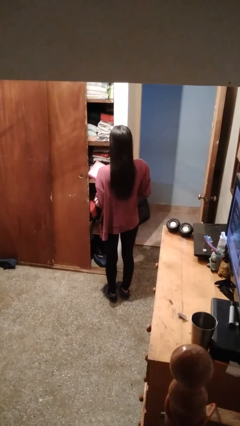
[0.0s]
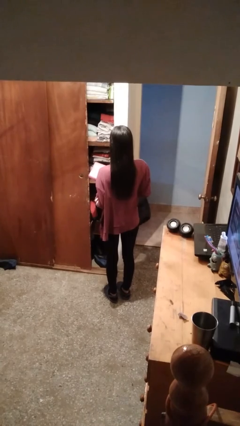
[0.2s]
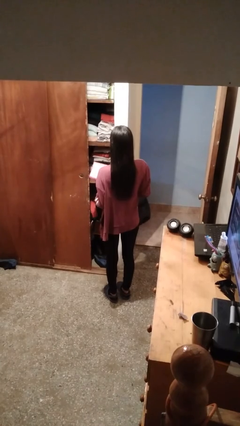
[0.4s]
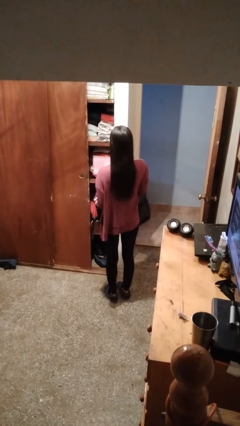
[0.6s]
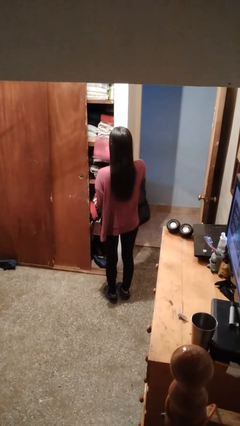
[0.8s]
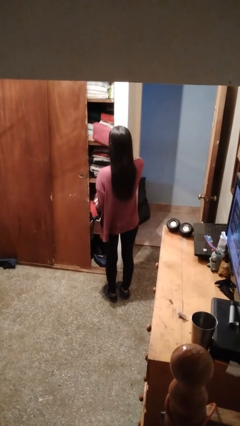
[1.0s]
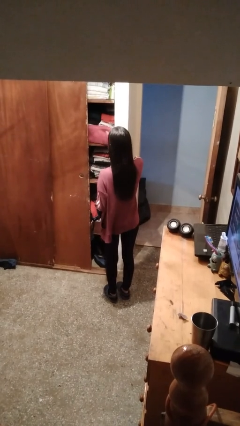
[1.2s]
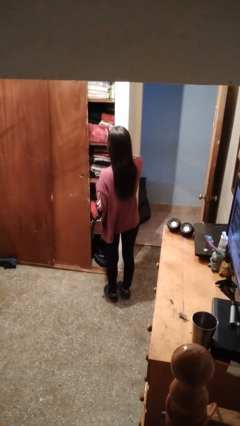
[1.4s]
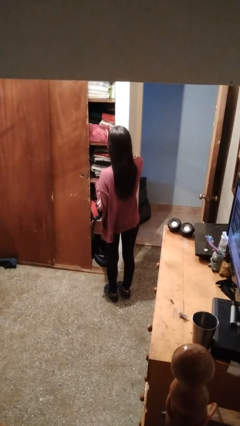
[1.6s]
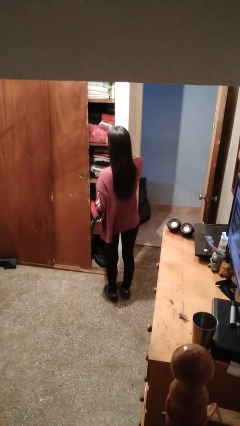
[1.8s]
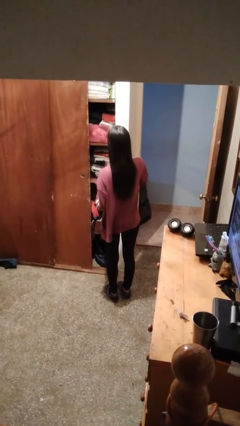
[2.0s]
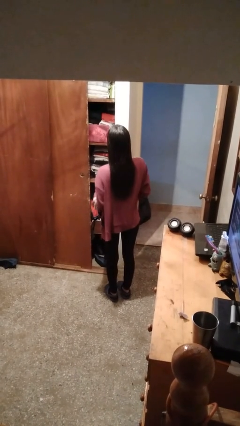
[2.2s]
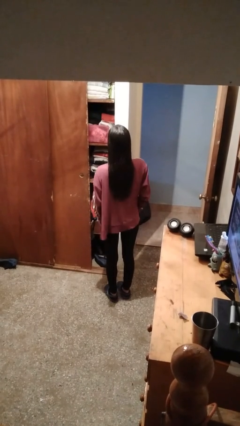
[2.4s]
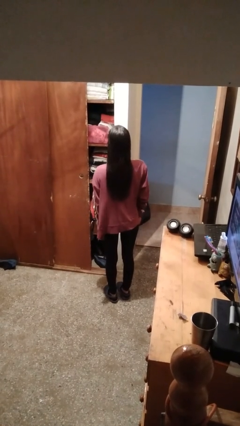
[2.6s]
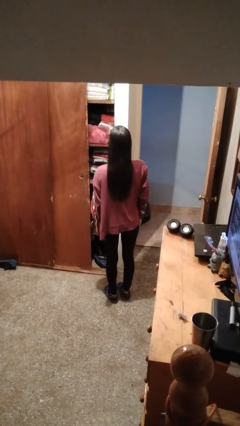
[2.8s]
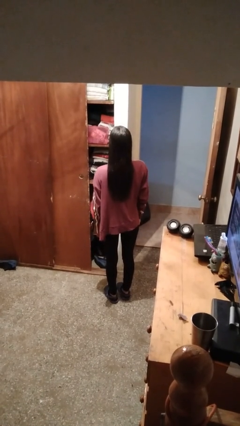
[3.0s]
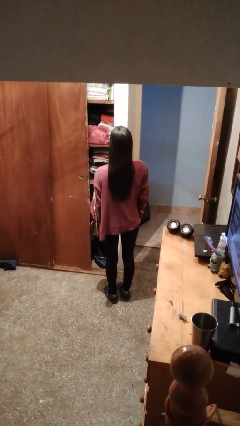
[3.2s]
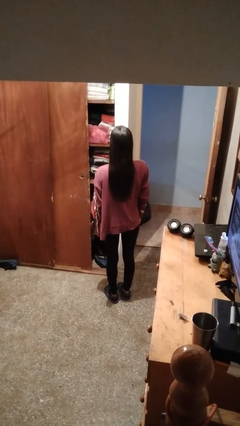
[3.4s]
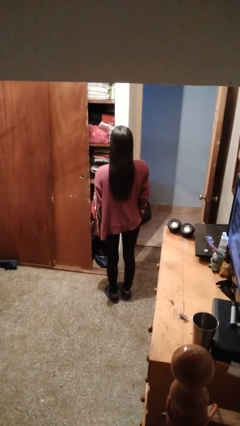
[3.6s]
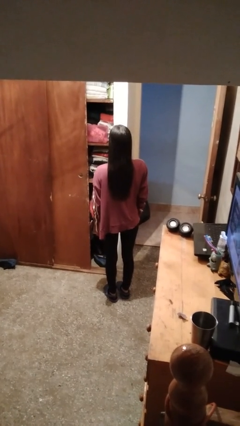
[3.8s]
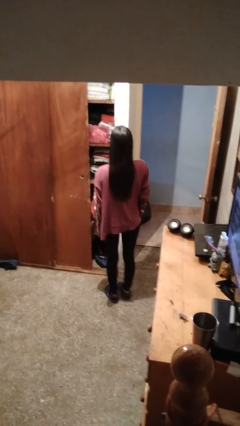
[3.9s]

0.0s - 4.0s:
person picks up object from shelf

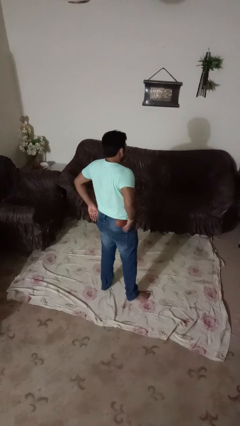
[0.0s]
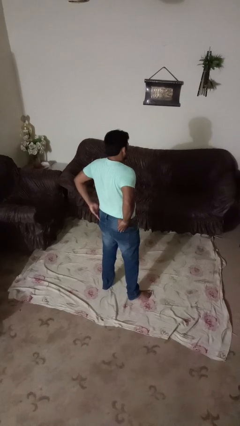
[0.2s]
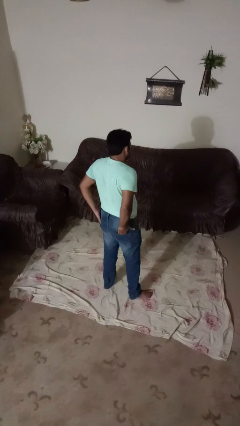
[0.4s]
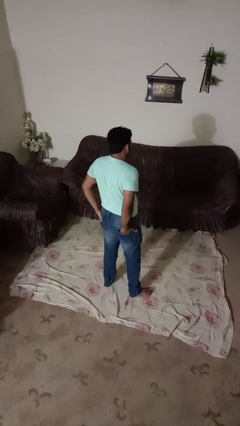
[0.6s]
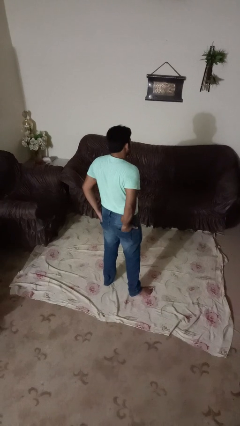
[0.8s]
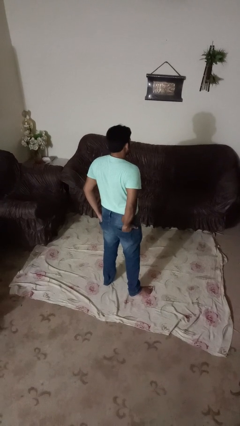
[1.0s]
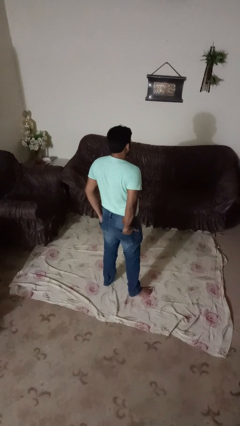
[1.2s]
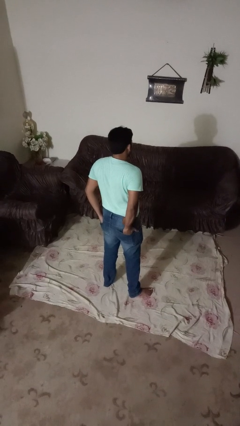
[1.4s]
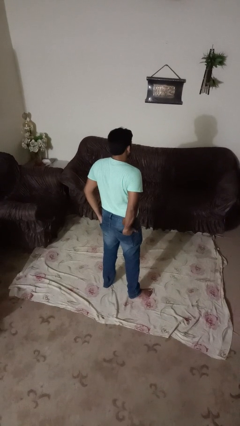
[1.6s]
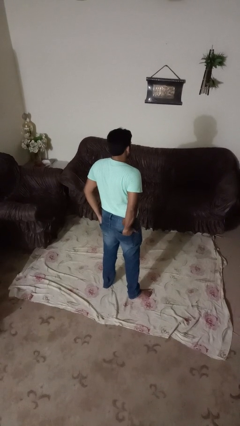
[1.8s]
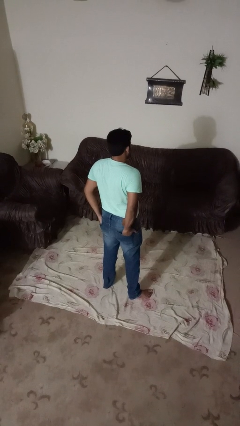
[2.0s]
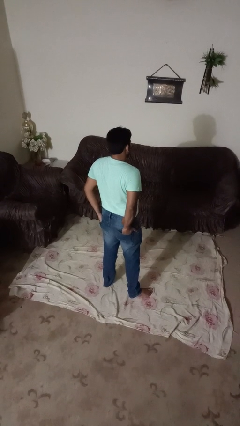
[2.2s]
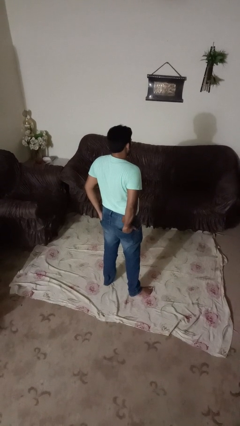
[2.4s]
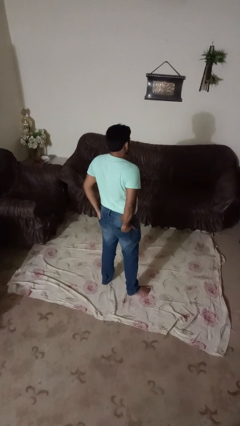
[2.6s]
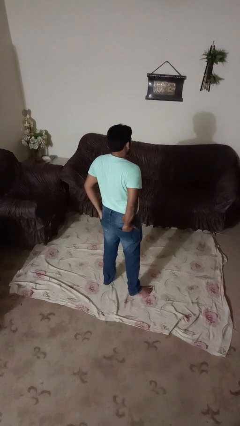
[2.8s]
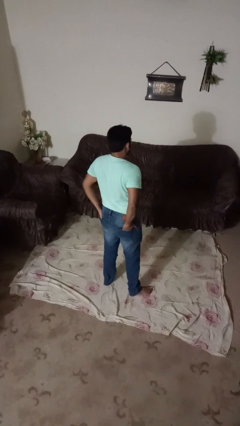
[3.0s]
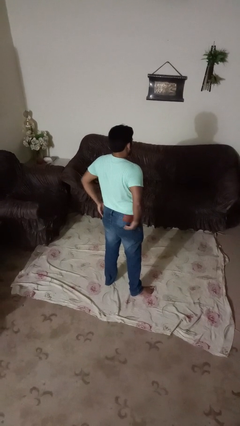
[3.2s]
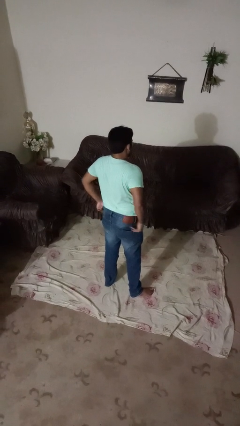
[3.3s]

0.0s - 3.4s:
person puts hands in back pockets

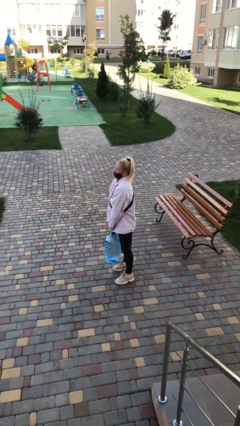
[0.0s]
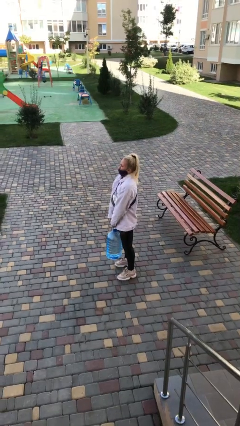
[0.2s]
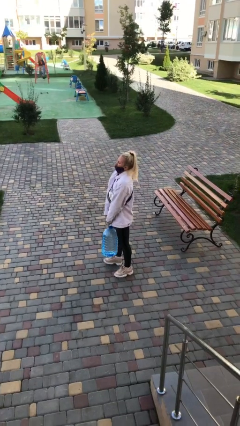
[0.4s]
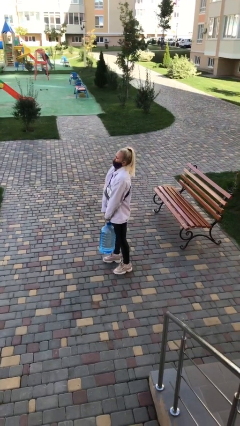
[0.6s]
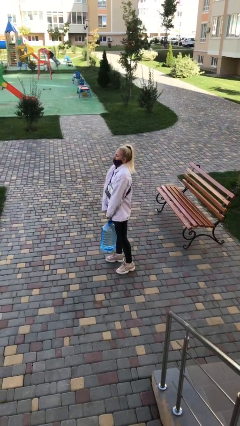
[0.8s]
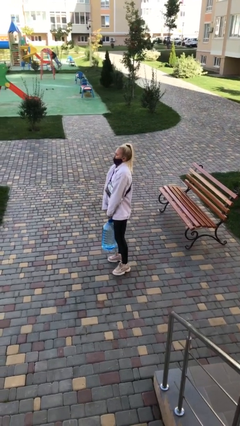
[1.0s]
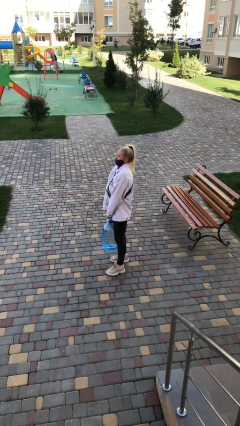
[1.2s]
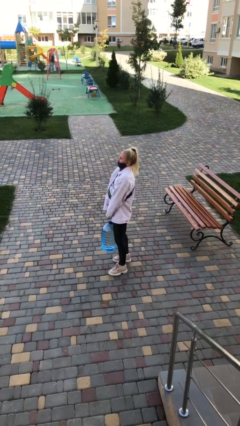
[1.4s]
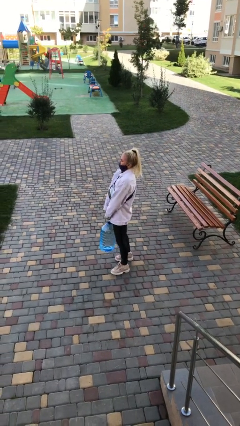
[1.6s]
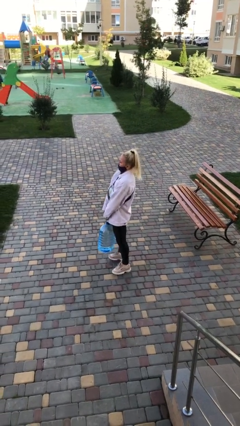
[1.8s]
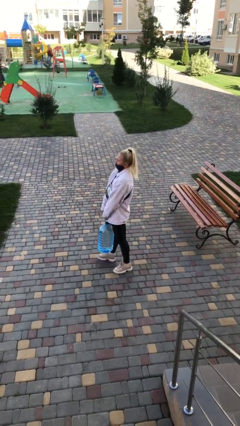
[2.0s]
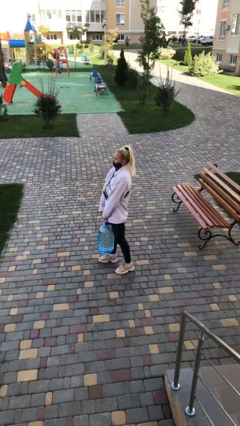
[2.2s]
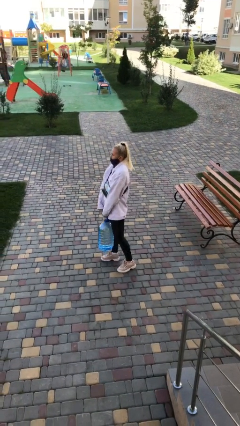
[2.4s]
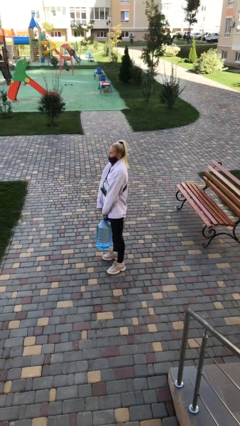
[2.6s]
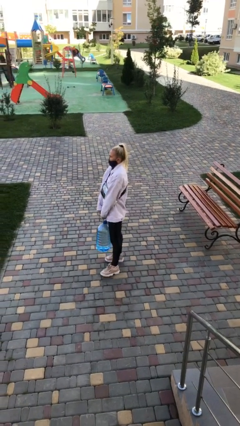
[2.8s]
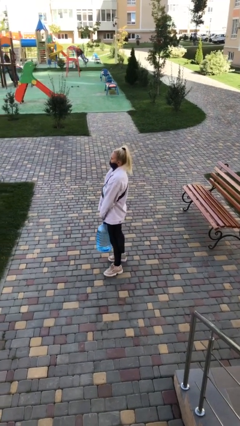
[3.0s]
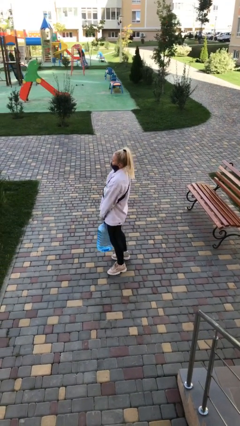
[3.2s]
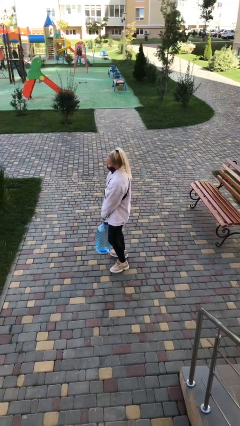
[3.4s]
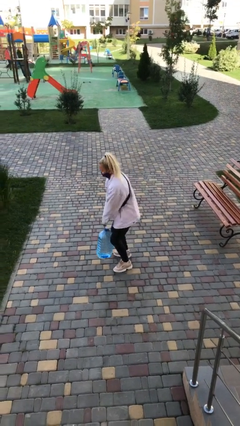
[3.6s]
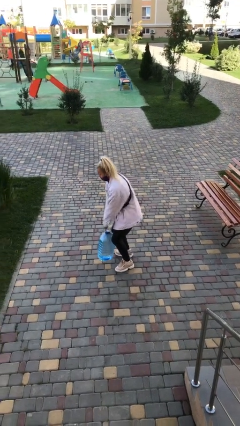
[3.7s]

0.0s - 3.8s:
person carries heavy object

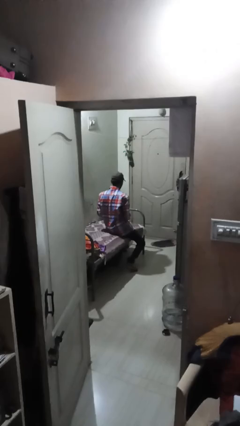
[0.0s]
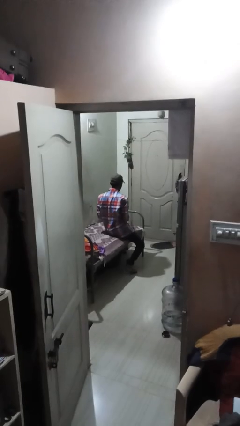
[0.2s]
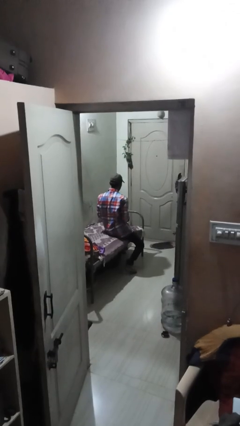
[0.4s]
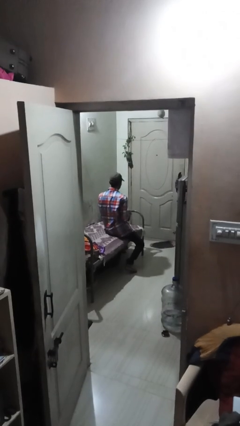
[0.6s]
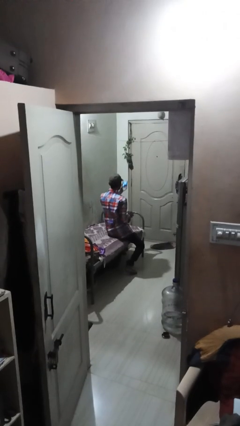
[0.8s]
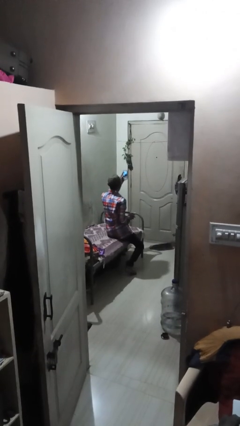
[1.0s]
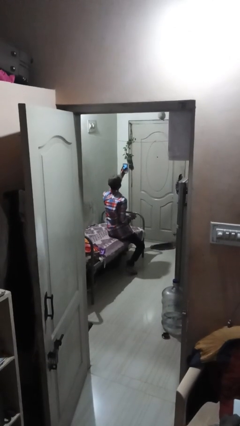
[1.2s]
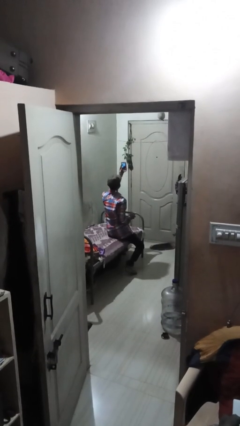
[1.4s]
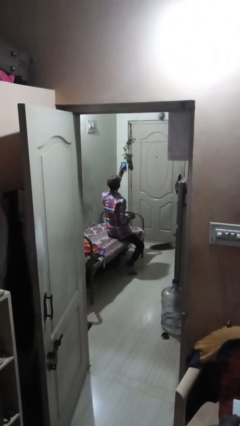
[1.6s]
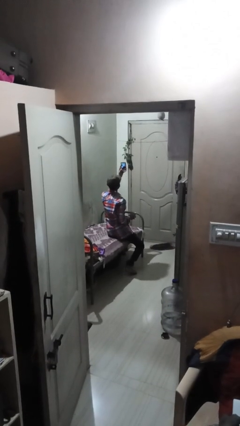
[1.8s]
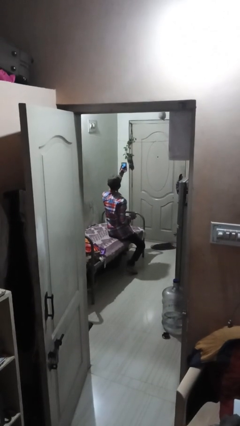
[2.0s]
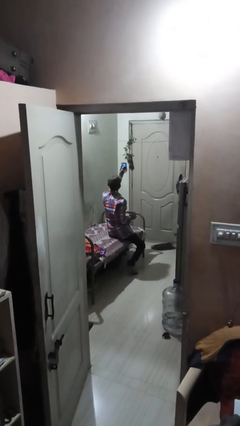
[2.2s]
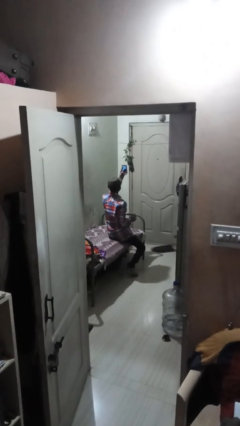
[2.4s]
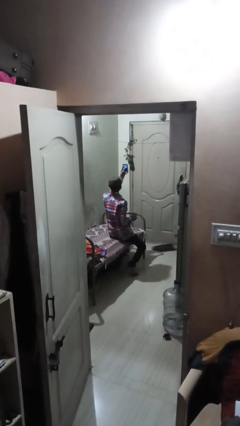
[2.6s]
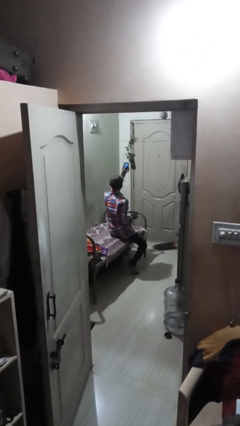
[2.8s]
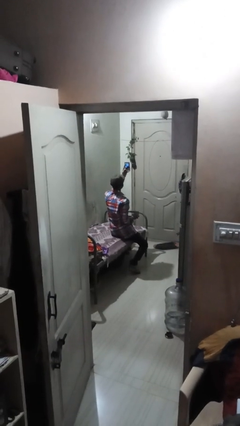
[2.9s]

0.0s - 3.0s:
person takes selfie

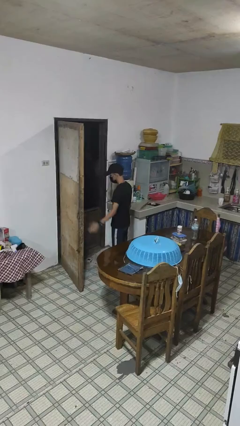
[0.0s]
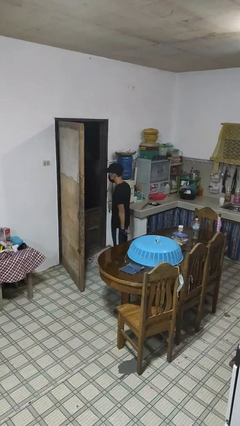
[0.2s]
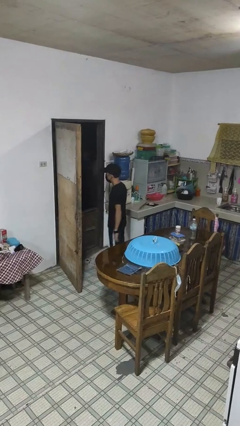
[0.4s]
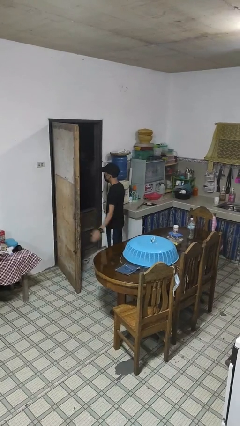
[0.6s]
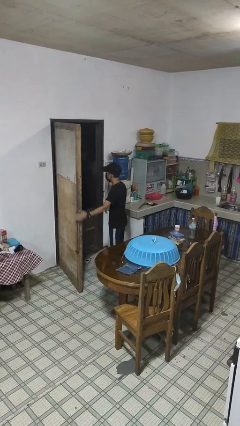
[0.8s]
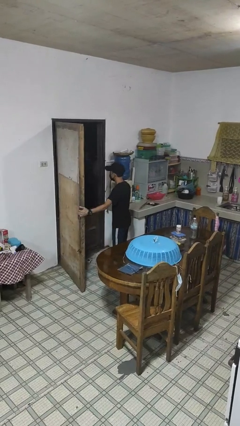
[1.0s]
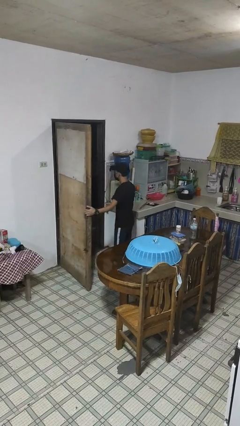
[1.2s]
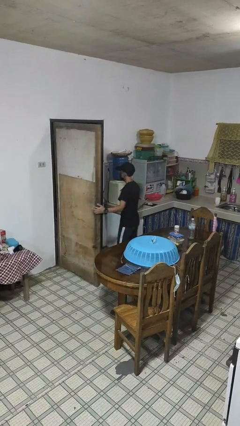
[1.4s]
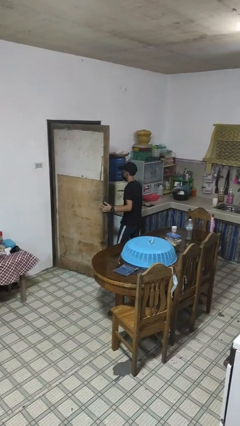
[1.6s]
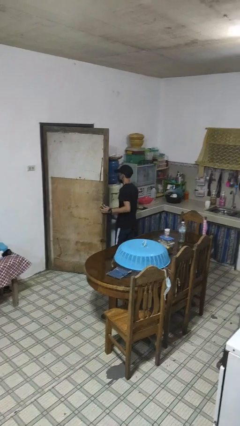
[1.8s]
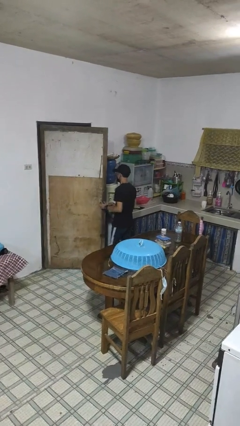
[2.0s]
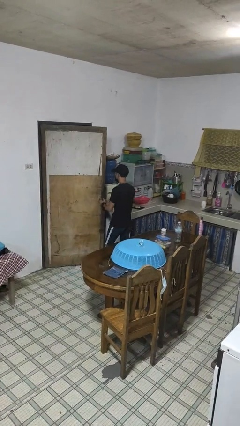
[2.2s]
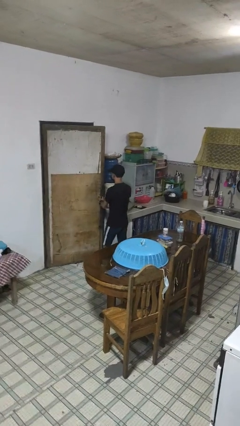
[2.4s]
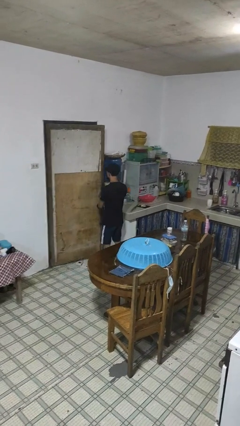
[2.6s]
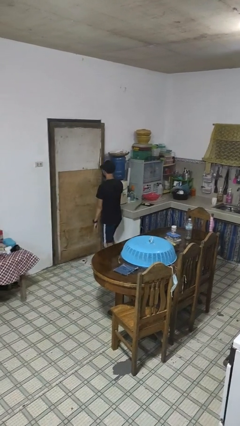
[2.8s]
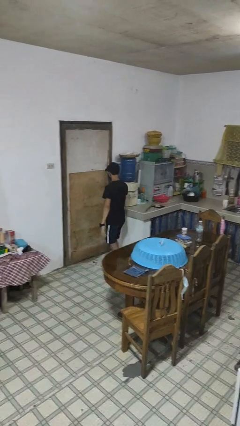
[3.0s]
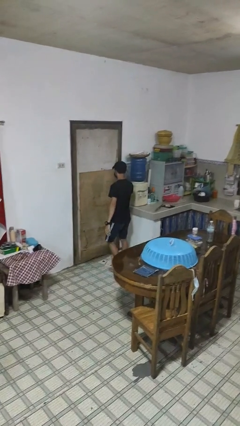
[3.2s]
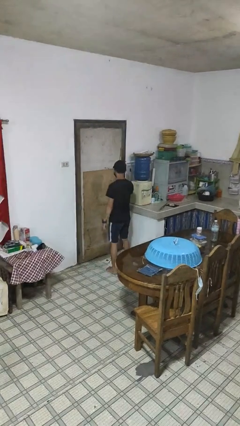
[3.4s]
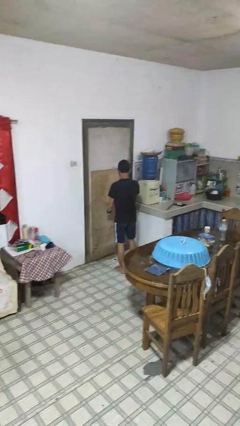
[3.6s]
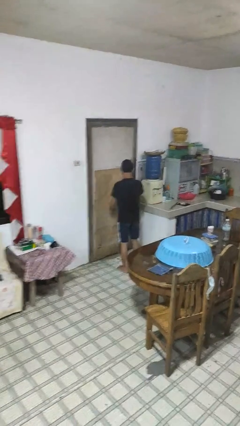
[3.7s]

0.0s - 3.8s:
person closes facility door

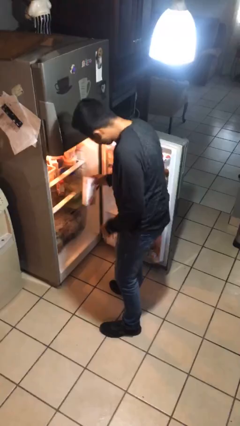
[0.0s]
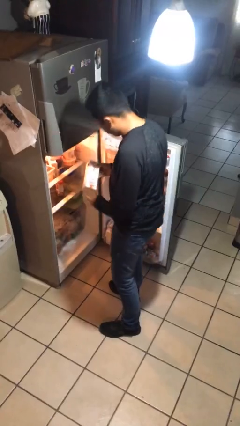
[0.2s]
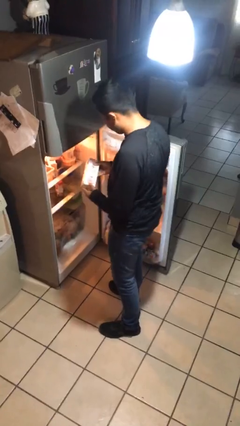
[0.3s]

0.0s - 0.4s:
person puts object into refrigerator
